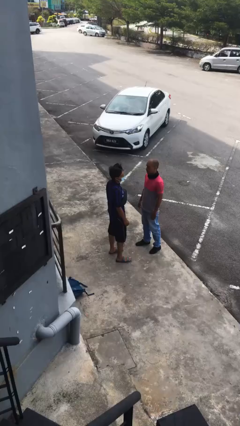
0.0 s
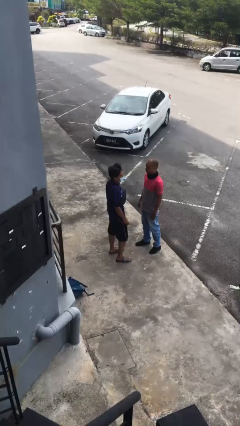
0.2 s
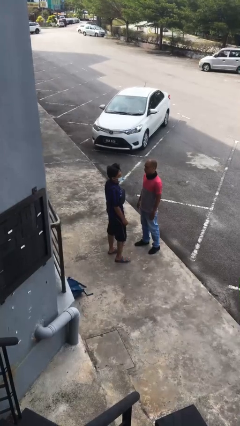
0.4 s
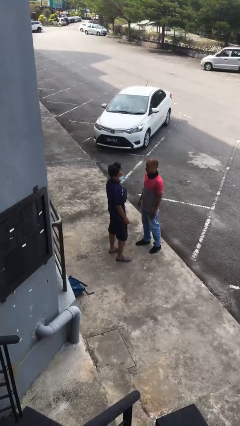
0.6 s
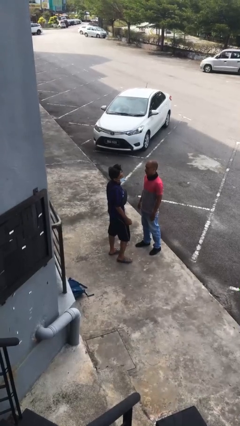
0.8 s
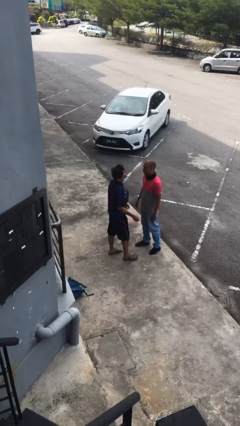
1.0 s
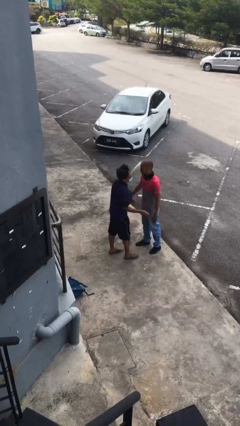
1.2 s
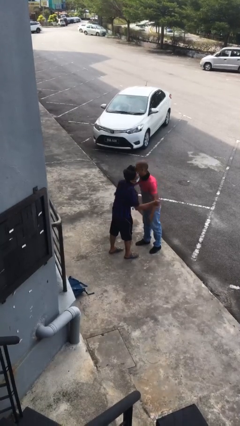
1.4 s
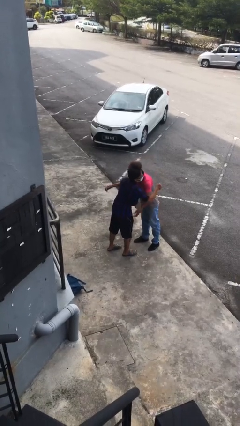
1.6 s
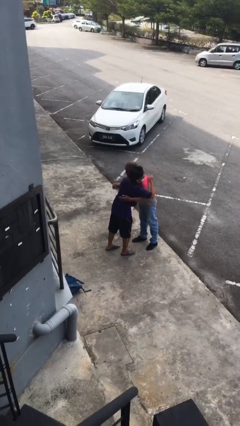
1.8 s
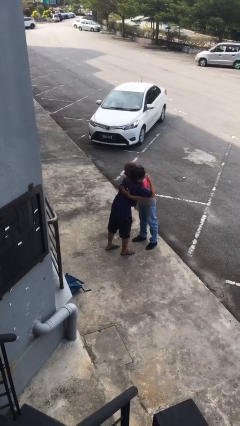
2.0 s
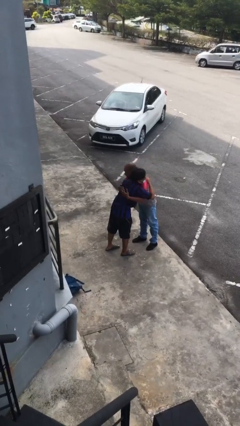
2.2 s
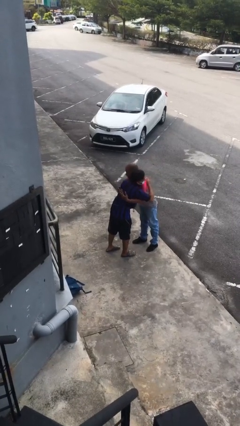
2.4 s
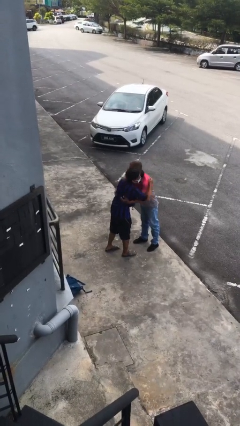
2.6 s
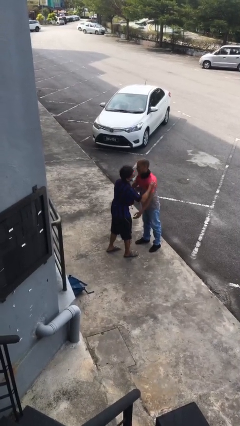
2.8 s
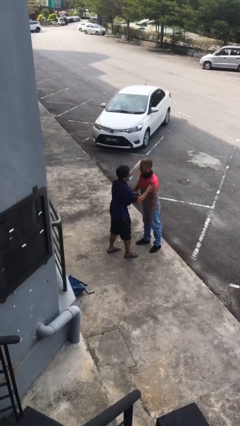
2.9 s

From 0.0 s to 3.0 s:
person embraces person

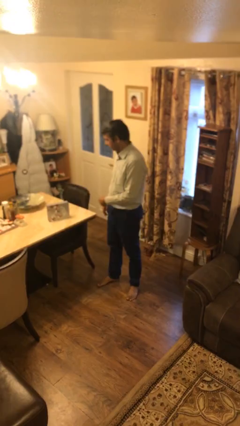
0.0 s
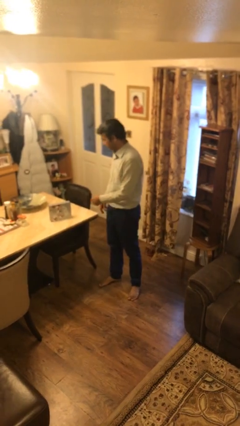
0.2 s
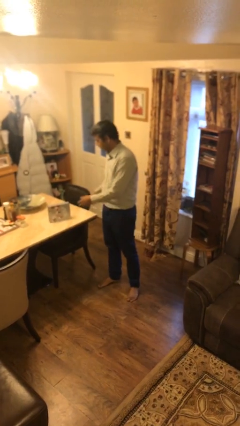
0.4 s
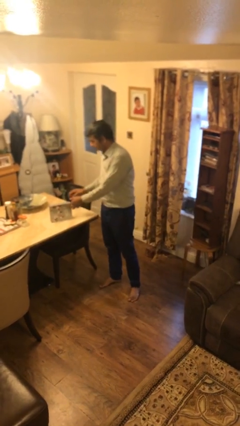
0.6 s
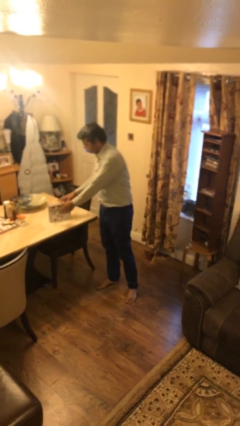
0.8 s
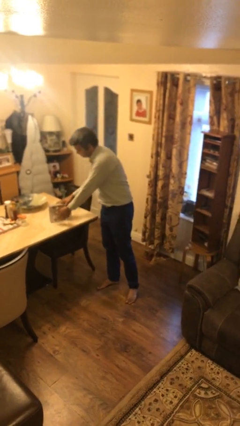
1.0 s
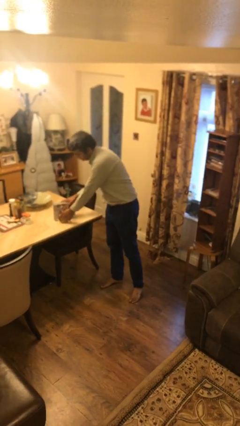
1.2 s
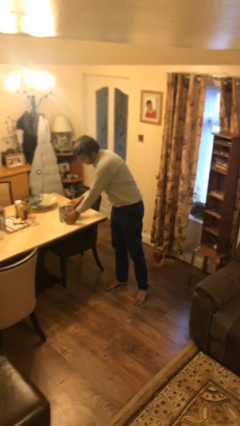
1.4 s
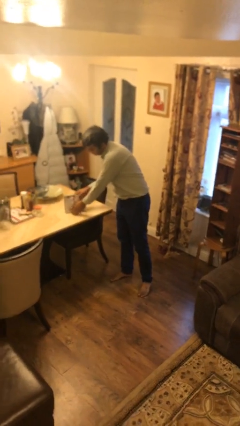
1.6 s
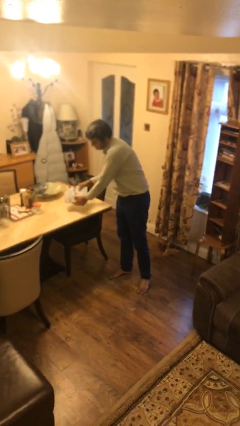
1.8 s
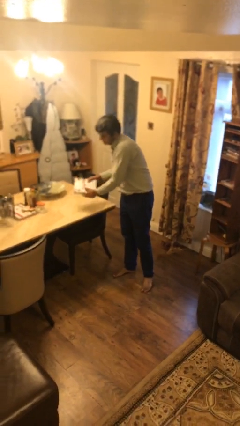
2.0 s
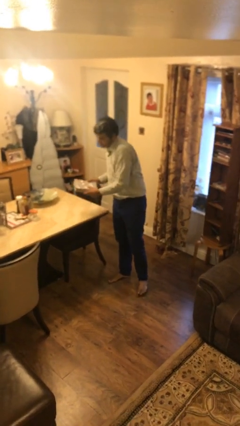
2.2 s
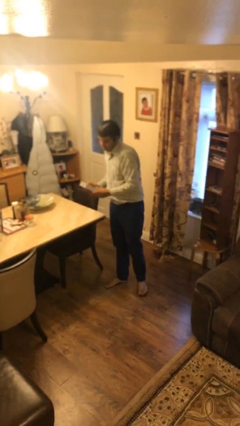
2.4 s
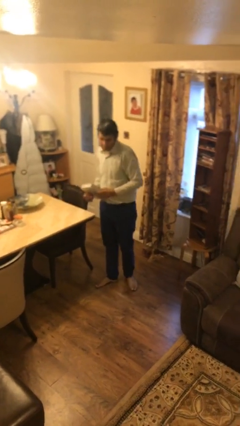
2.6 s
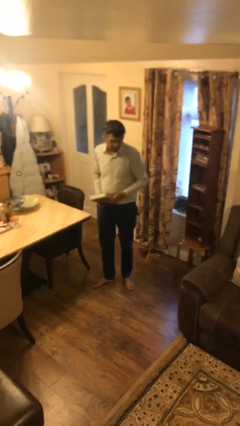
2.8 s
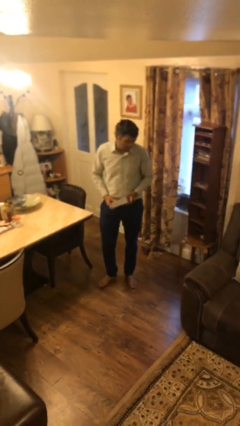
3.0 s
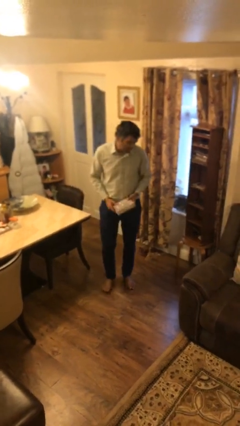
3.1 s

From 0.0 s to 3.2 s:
person picks up object from table

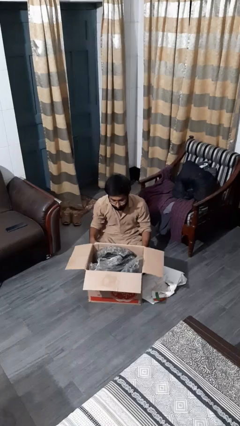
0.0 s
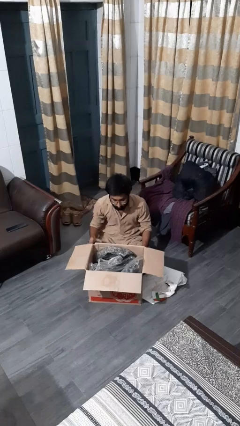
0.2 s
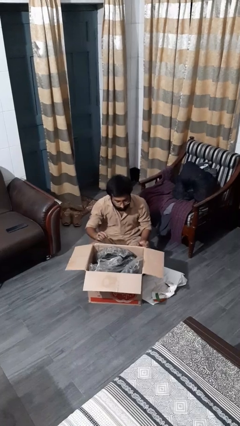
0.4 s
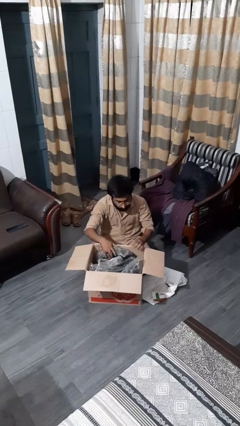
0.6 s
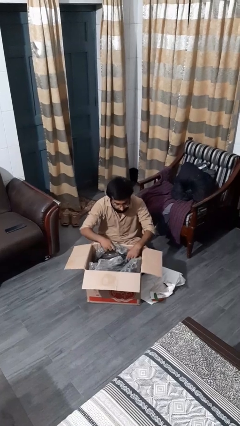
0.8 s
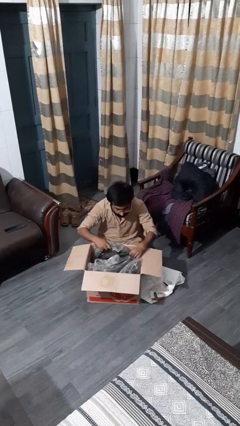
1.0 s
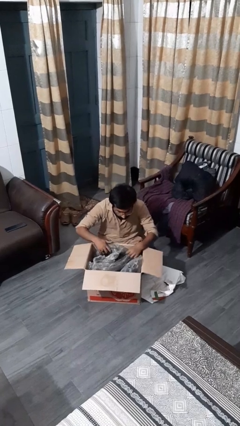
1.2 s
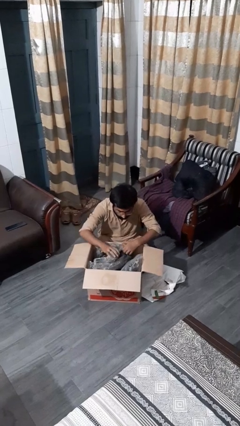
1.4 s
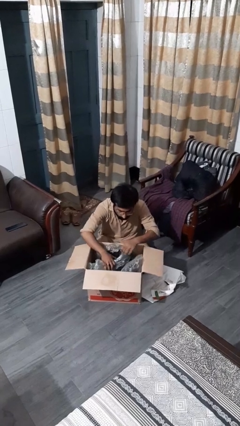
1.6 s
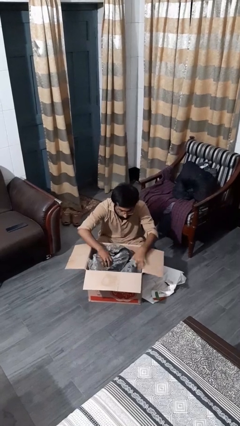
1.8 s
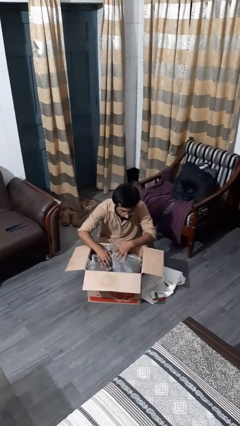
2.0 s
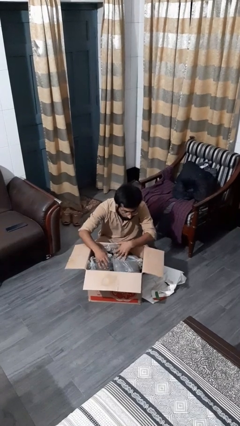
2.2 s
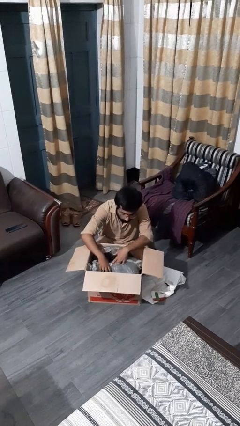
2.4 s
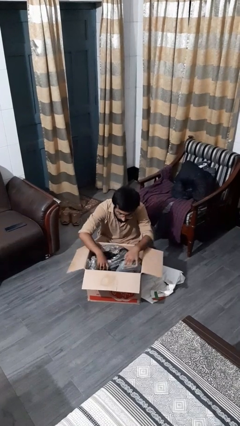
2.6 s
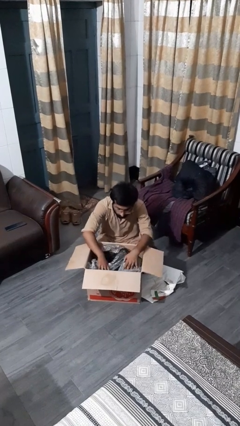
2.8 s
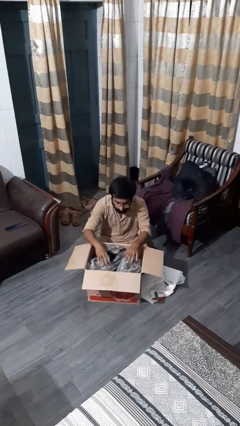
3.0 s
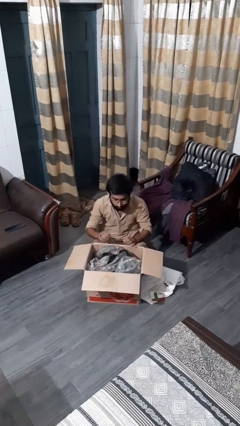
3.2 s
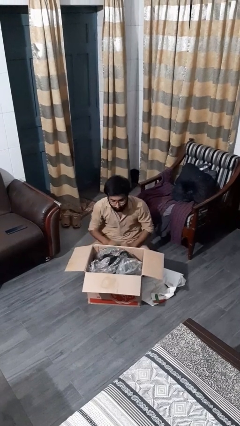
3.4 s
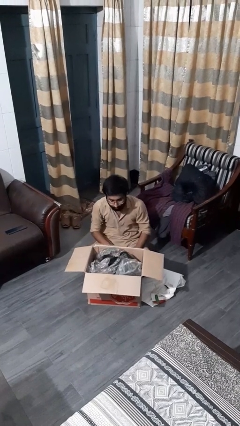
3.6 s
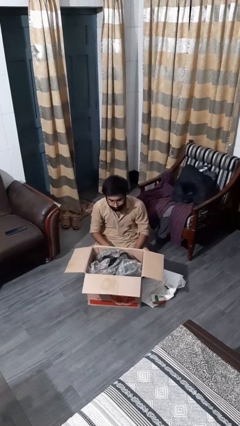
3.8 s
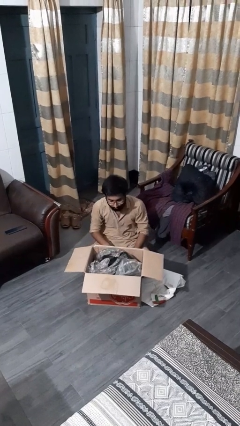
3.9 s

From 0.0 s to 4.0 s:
person searches in box

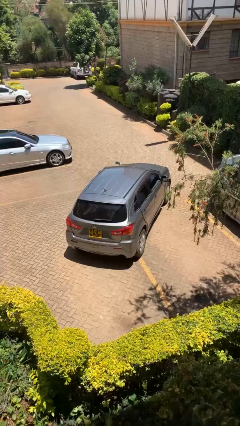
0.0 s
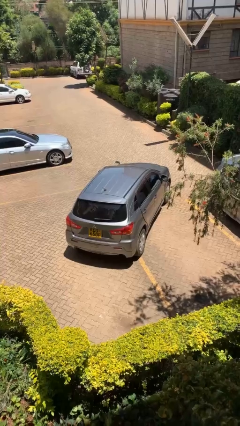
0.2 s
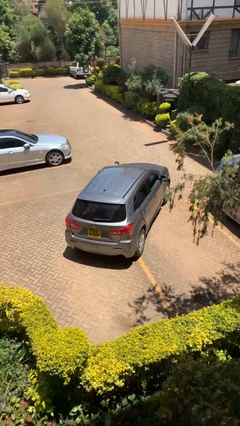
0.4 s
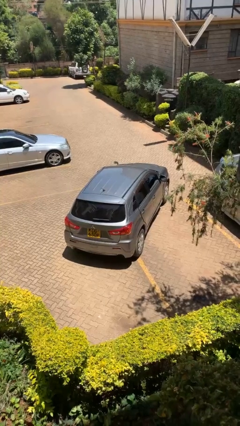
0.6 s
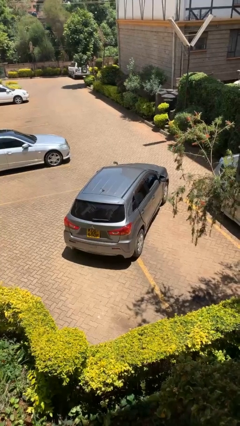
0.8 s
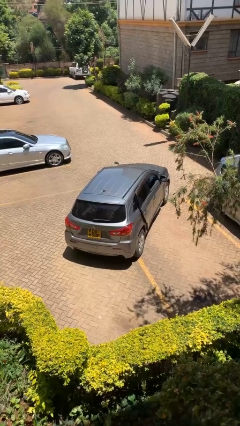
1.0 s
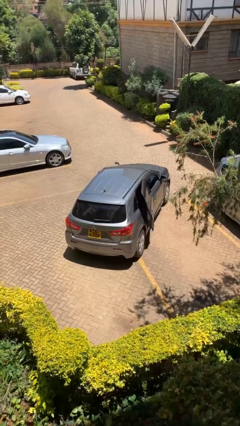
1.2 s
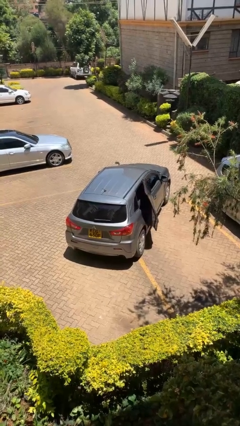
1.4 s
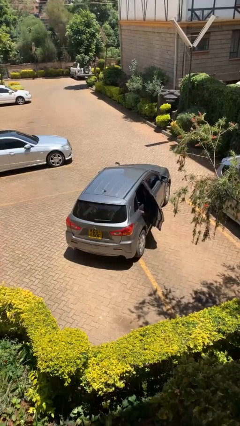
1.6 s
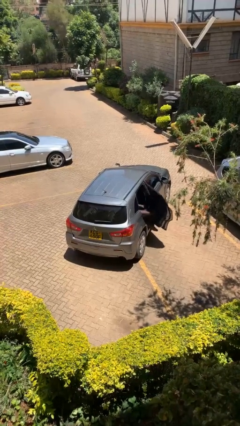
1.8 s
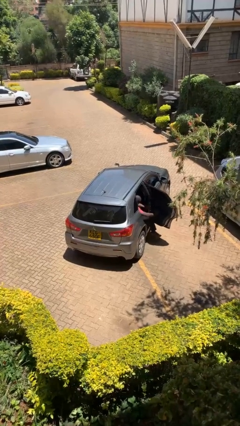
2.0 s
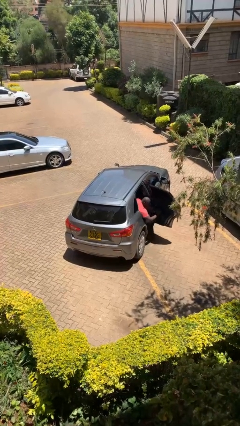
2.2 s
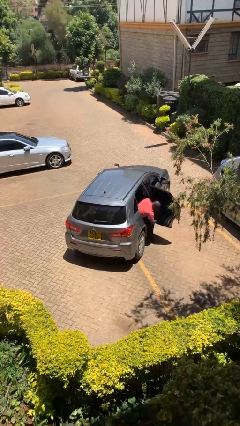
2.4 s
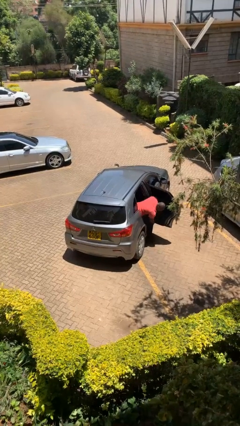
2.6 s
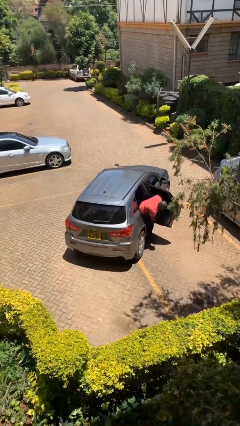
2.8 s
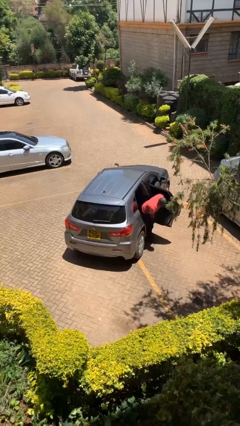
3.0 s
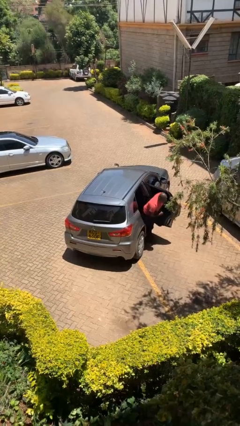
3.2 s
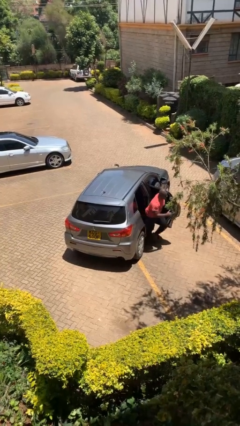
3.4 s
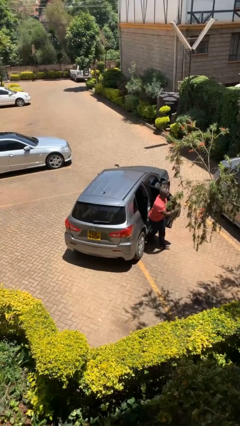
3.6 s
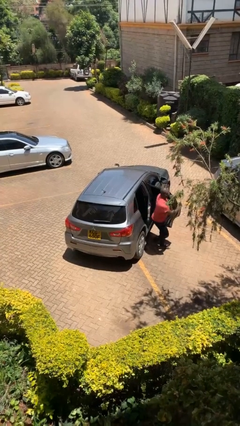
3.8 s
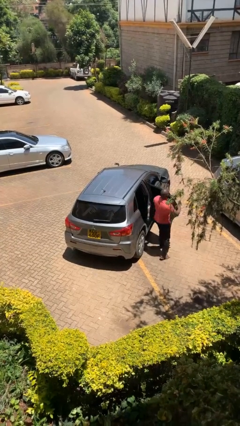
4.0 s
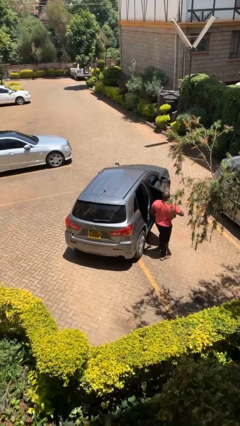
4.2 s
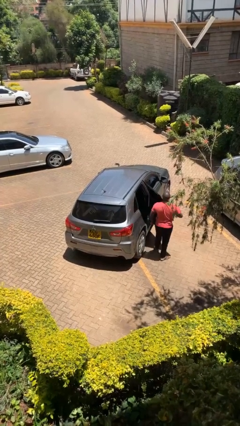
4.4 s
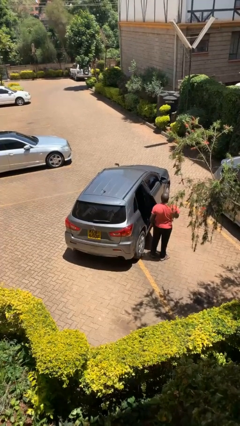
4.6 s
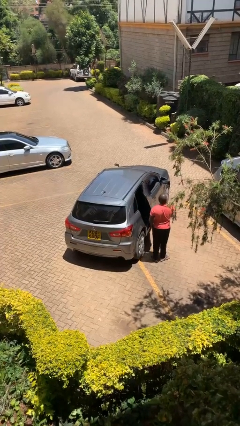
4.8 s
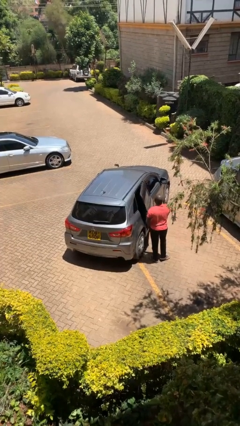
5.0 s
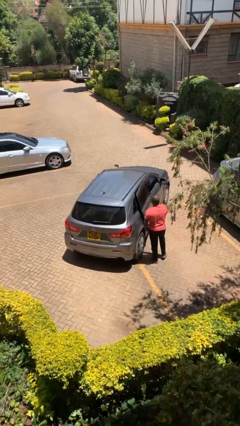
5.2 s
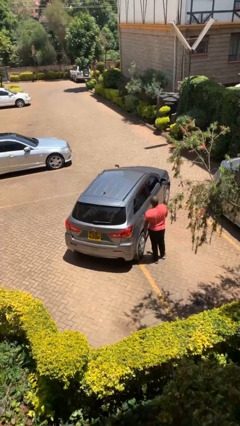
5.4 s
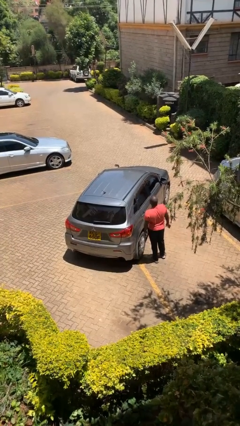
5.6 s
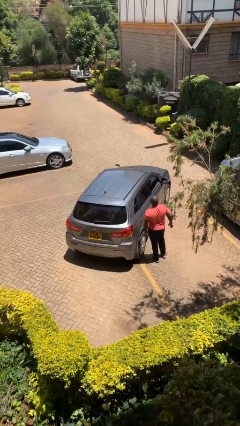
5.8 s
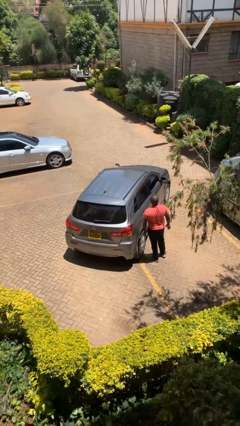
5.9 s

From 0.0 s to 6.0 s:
car drops off person

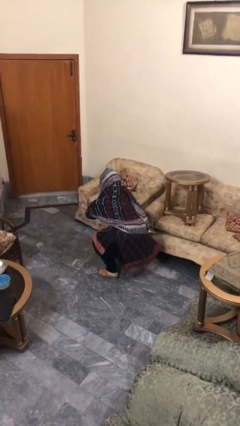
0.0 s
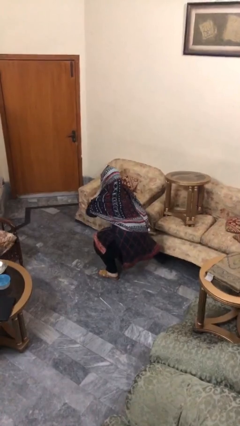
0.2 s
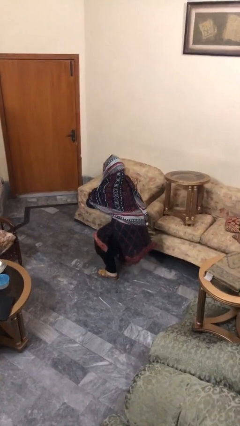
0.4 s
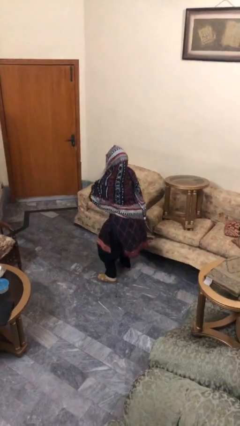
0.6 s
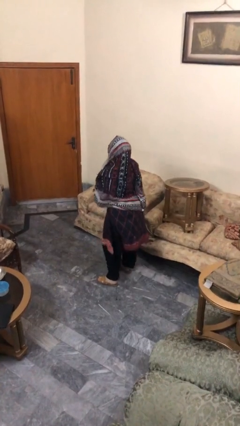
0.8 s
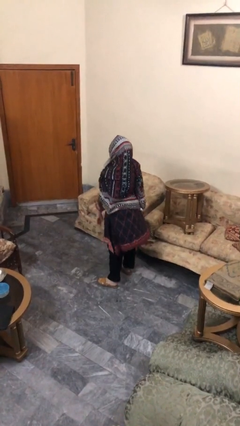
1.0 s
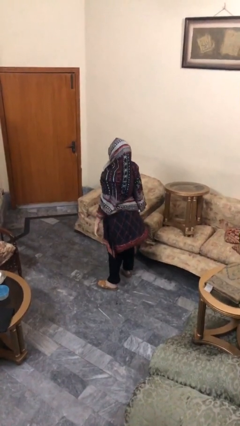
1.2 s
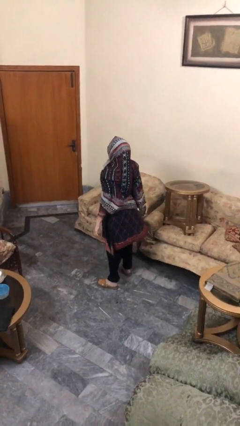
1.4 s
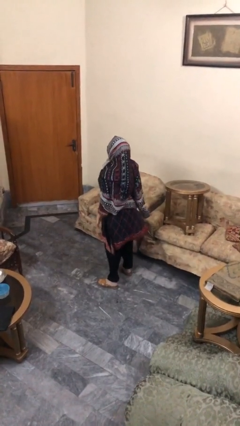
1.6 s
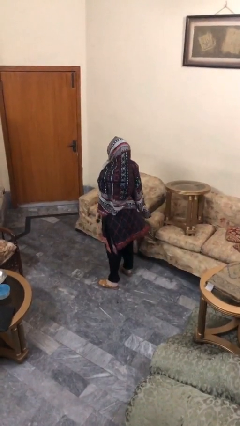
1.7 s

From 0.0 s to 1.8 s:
person stands up
